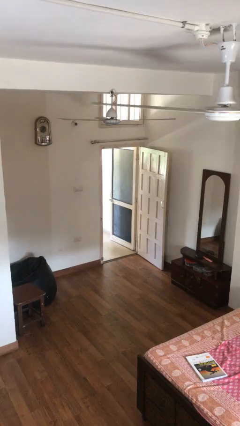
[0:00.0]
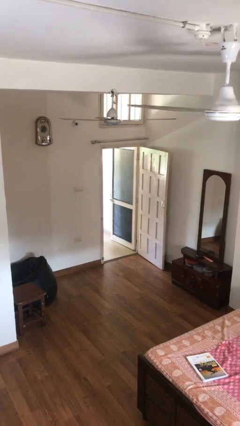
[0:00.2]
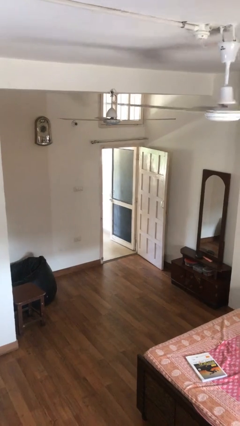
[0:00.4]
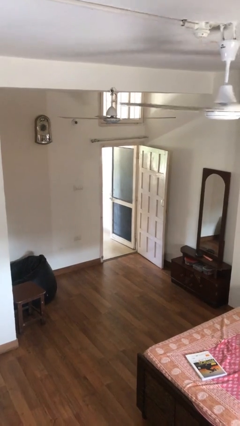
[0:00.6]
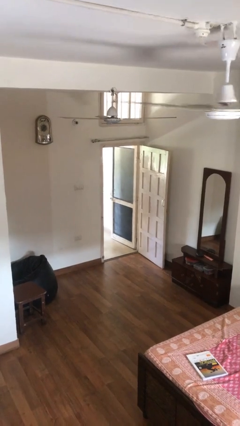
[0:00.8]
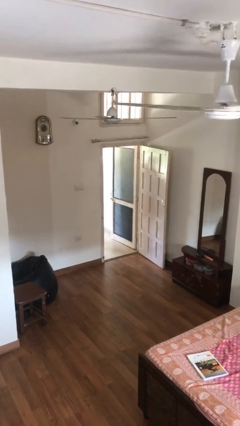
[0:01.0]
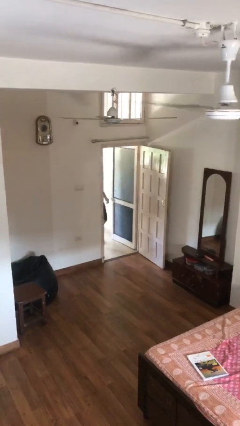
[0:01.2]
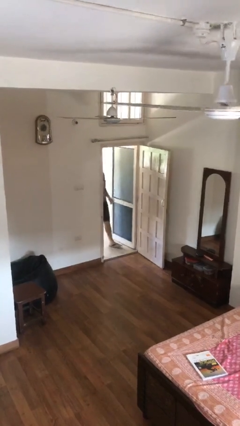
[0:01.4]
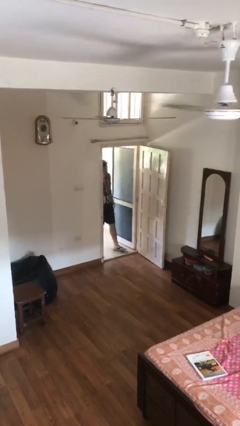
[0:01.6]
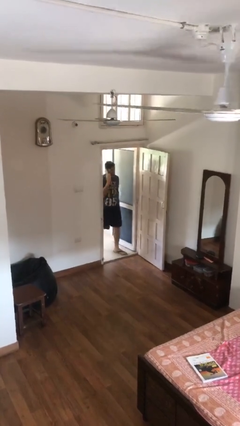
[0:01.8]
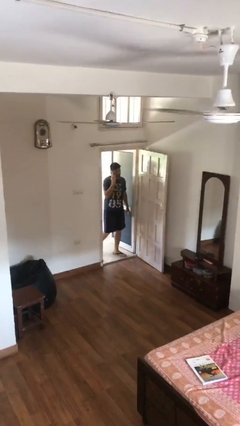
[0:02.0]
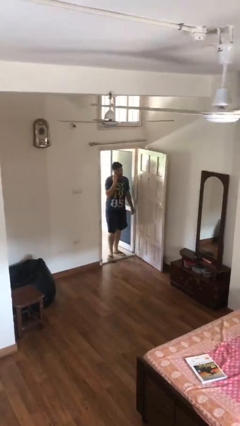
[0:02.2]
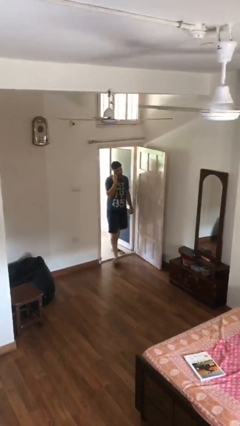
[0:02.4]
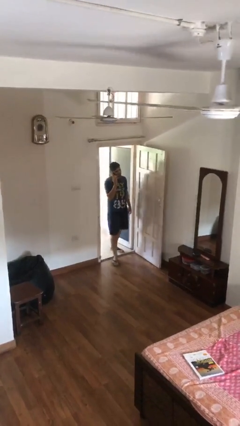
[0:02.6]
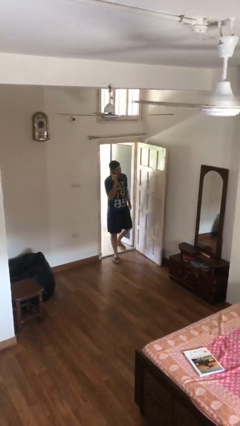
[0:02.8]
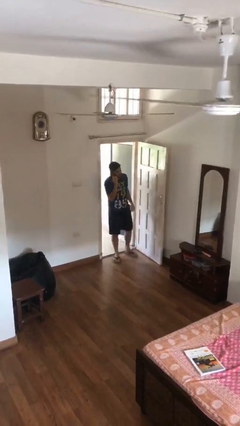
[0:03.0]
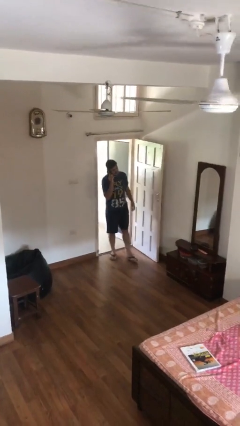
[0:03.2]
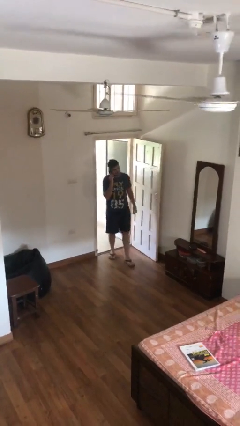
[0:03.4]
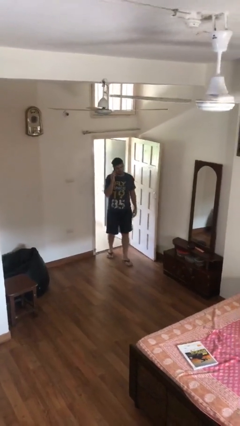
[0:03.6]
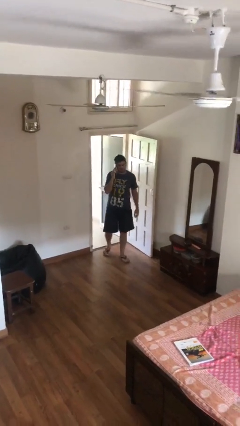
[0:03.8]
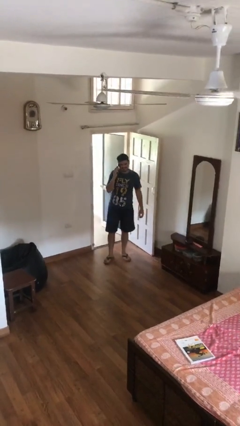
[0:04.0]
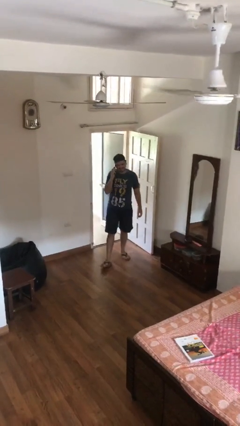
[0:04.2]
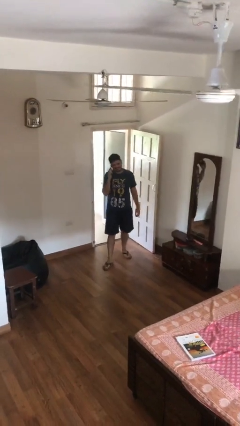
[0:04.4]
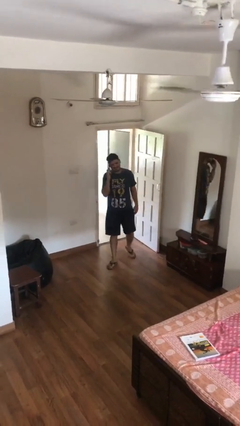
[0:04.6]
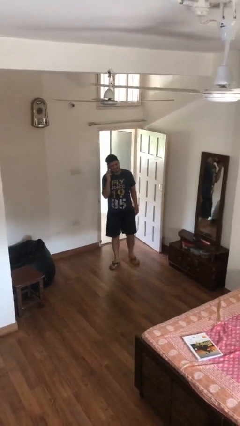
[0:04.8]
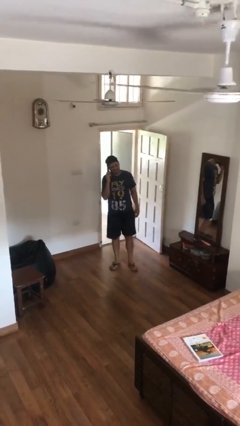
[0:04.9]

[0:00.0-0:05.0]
person enters scene through structure

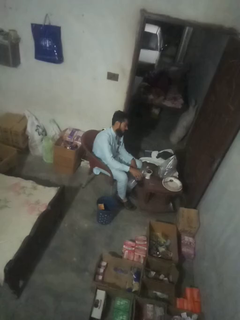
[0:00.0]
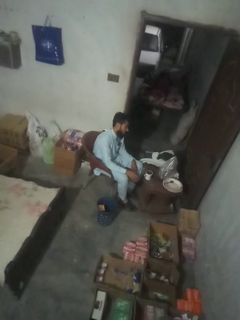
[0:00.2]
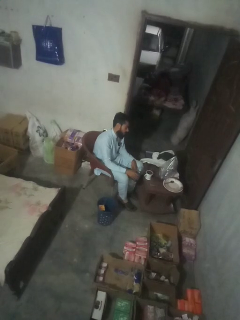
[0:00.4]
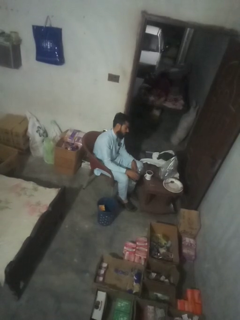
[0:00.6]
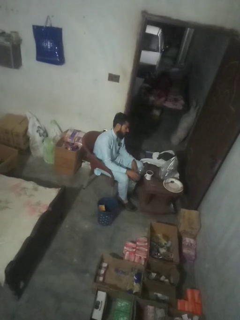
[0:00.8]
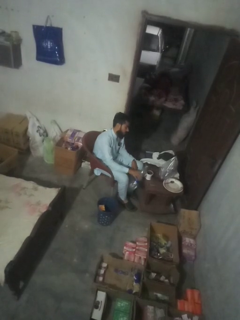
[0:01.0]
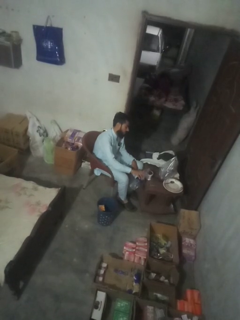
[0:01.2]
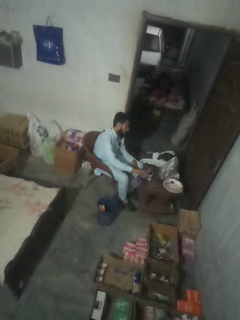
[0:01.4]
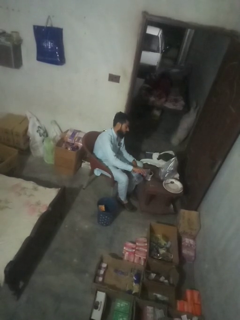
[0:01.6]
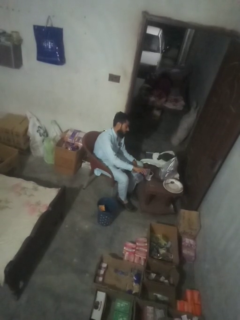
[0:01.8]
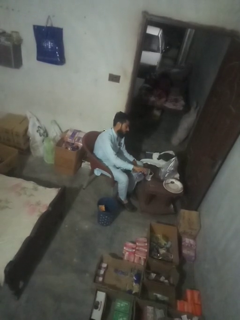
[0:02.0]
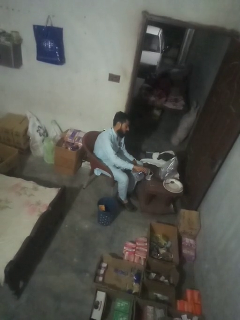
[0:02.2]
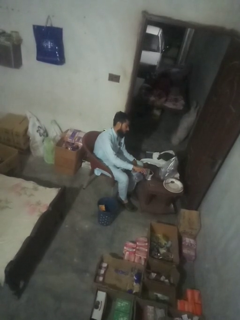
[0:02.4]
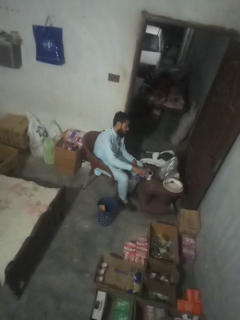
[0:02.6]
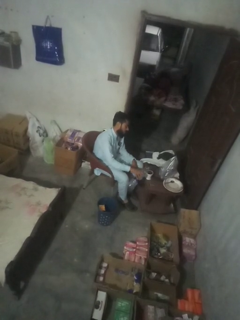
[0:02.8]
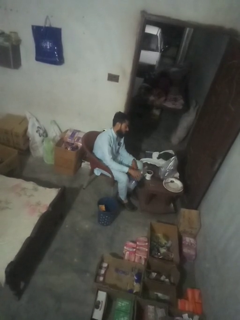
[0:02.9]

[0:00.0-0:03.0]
person pours liquid into cup

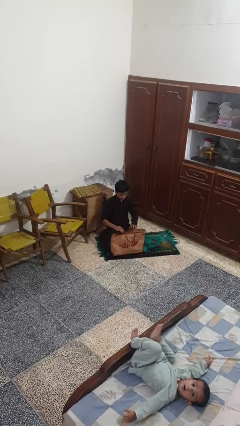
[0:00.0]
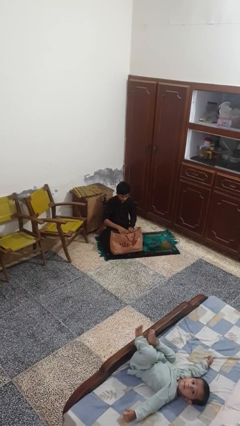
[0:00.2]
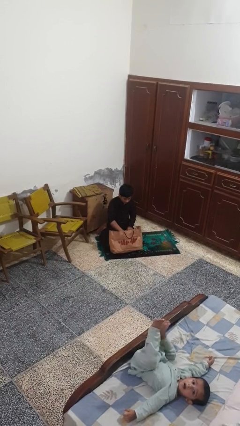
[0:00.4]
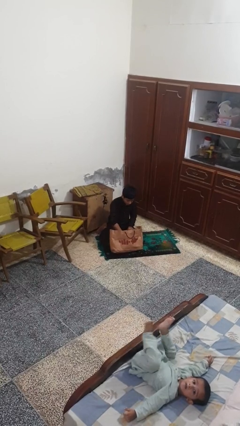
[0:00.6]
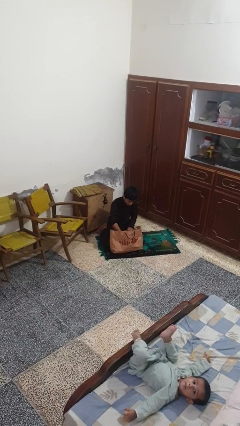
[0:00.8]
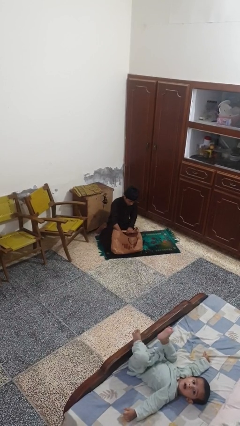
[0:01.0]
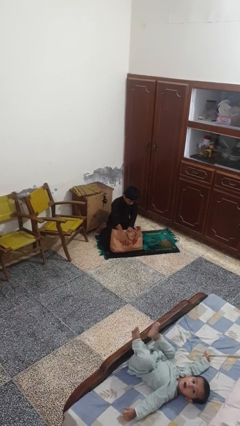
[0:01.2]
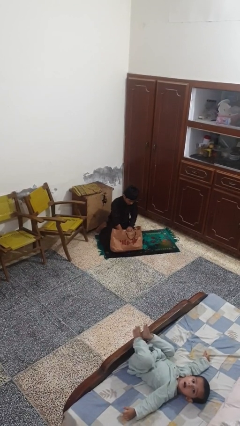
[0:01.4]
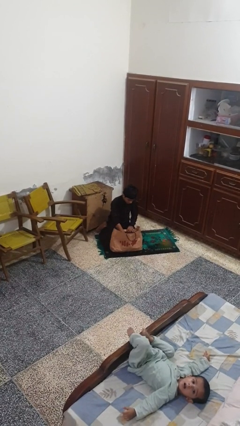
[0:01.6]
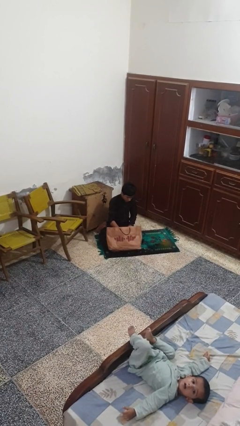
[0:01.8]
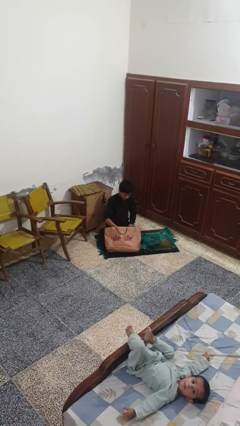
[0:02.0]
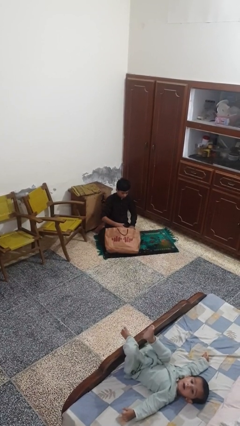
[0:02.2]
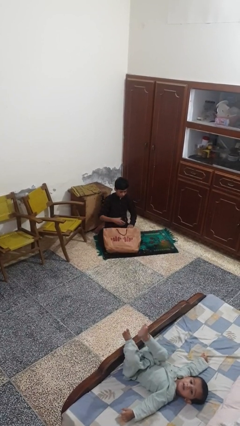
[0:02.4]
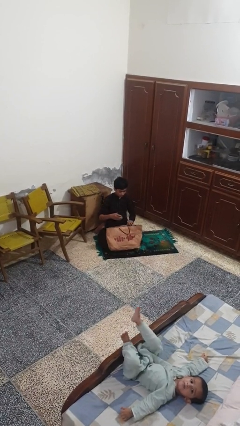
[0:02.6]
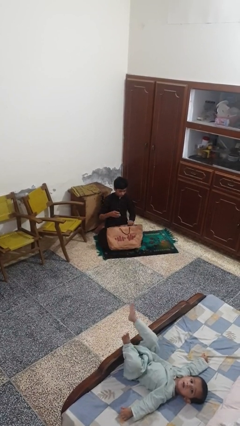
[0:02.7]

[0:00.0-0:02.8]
person takes object from bag

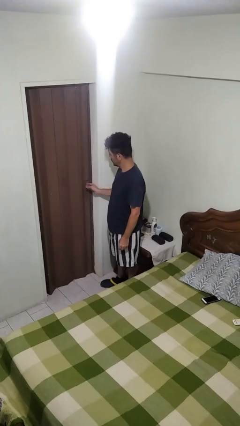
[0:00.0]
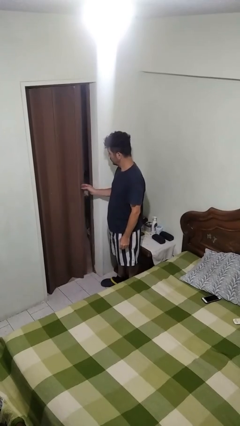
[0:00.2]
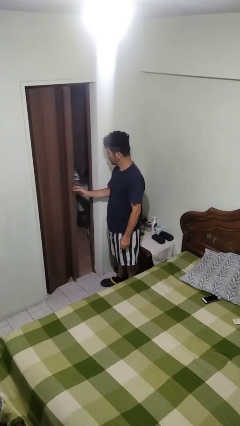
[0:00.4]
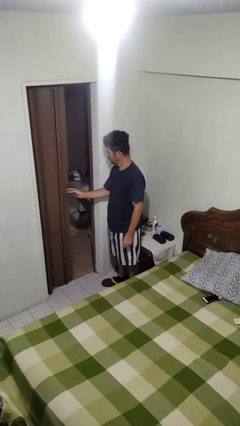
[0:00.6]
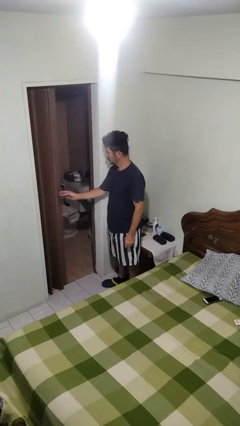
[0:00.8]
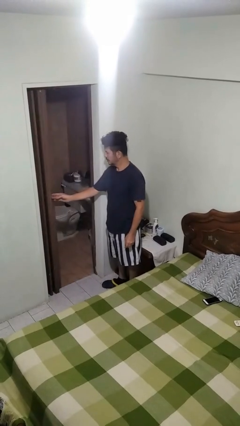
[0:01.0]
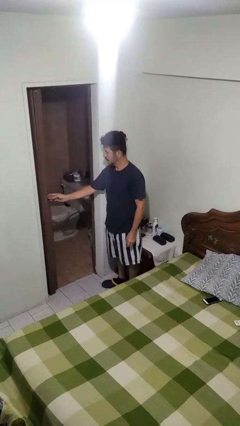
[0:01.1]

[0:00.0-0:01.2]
person opens sliding door

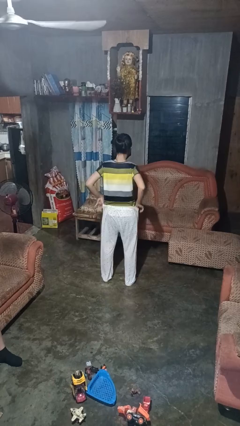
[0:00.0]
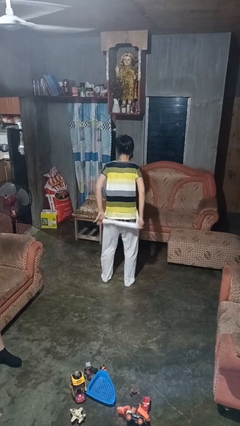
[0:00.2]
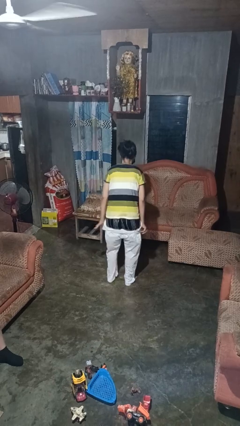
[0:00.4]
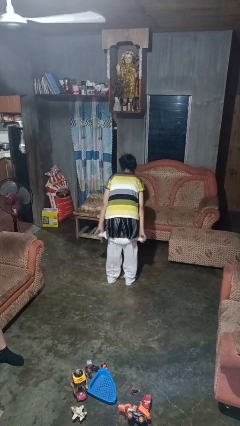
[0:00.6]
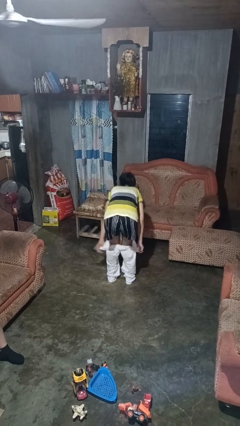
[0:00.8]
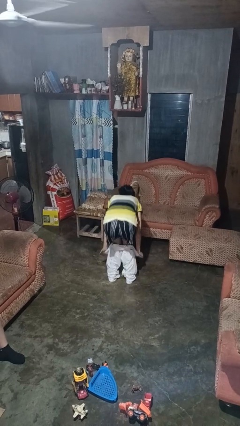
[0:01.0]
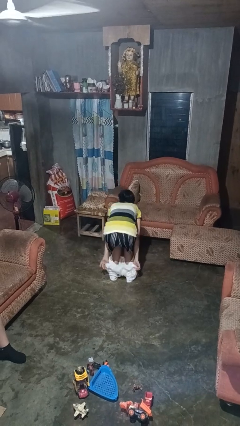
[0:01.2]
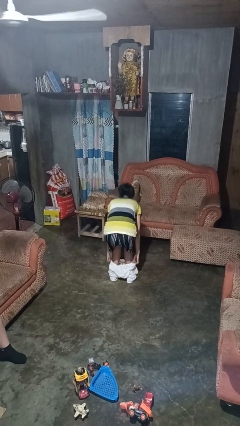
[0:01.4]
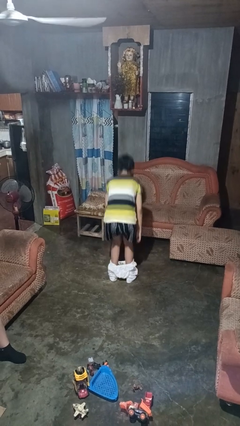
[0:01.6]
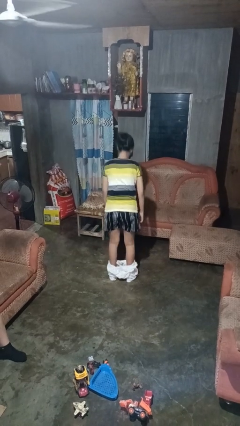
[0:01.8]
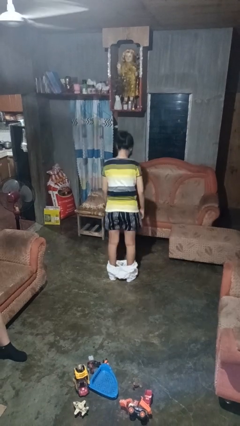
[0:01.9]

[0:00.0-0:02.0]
person takes off pants

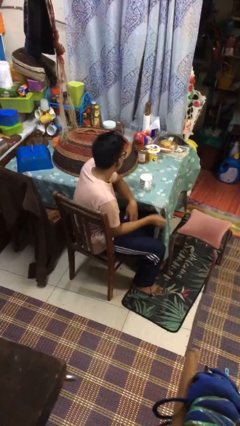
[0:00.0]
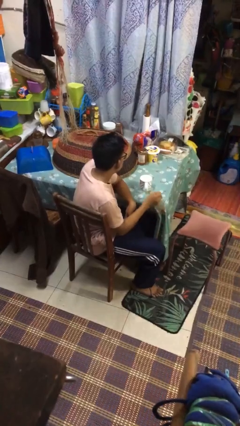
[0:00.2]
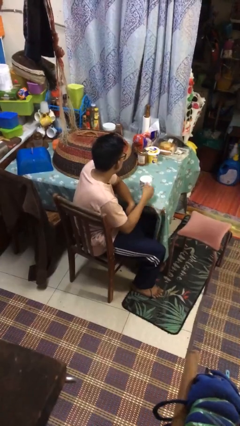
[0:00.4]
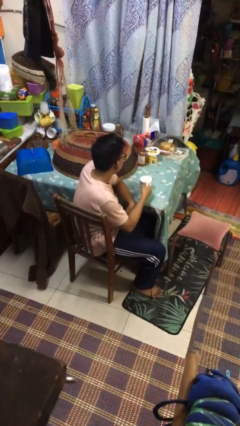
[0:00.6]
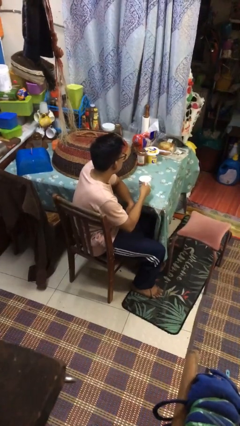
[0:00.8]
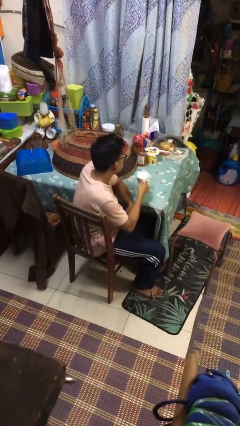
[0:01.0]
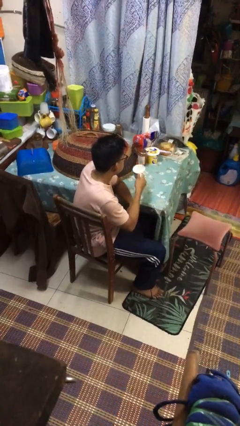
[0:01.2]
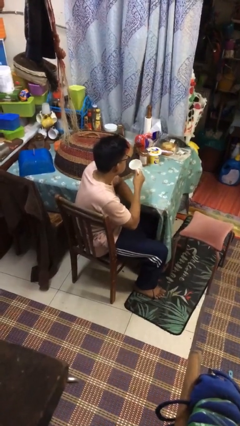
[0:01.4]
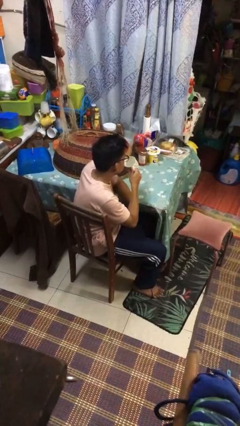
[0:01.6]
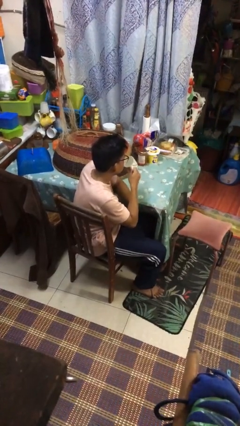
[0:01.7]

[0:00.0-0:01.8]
person picks up object from table

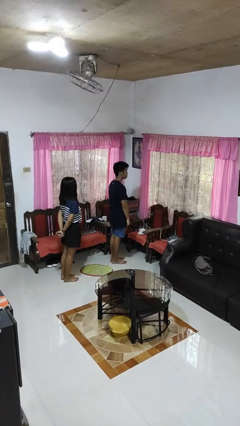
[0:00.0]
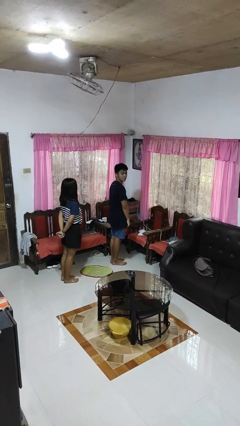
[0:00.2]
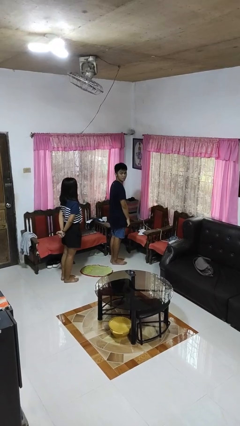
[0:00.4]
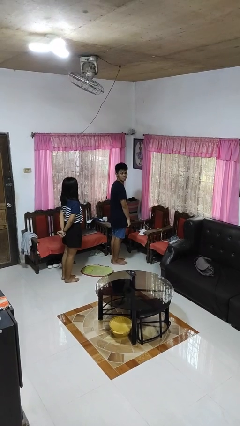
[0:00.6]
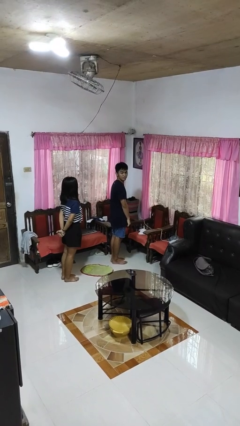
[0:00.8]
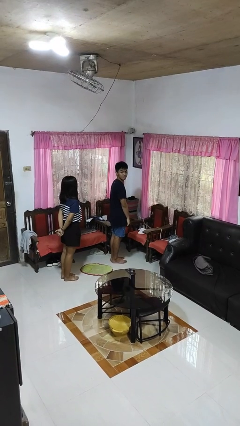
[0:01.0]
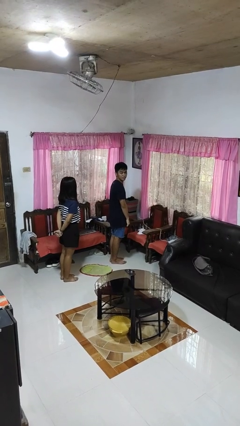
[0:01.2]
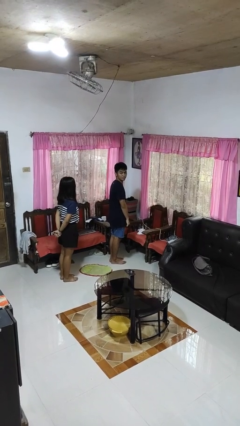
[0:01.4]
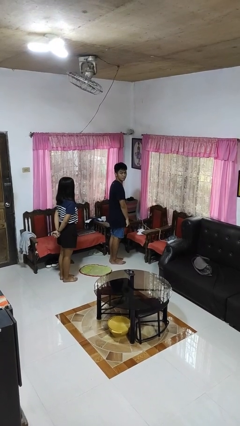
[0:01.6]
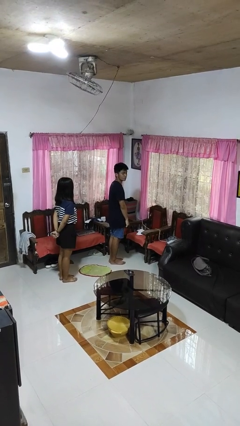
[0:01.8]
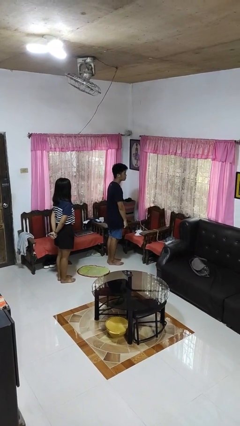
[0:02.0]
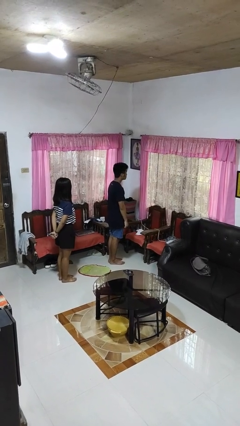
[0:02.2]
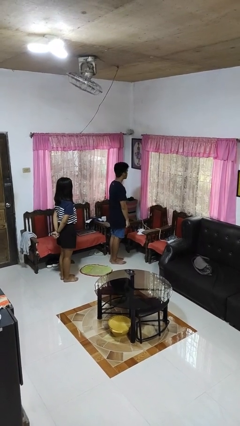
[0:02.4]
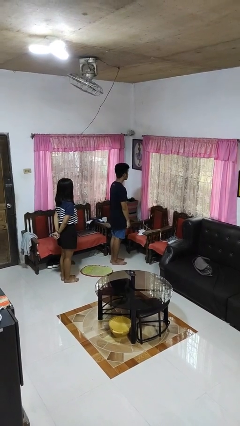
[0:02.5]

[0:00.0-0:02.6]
person looks over shoulder
